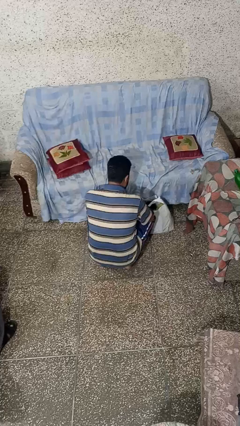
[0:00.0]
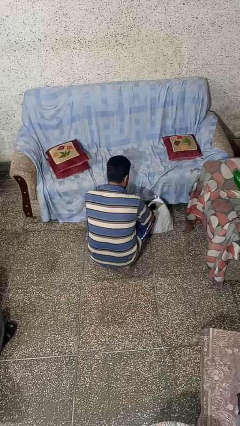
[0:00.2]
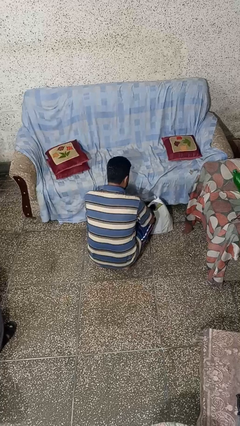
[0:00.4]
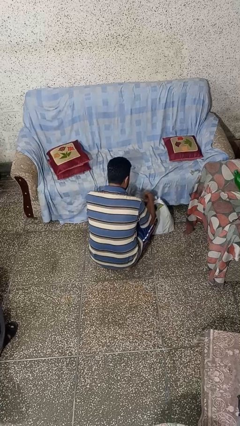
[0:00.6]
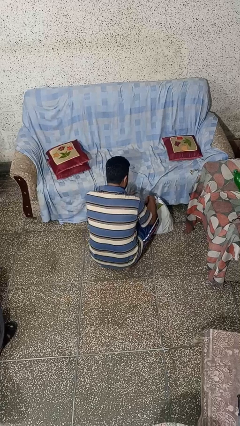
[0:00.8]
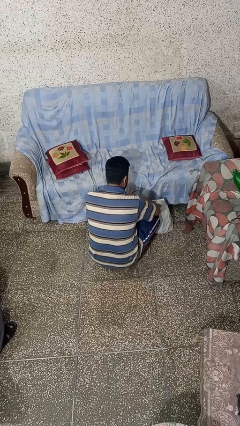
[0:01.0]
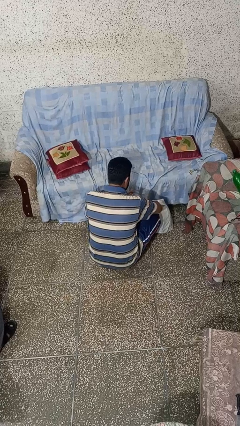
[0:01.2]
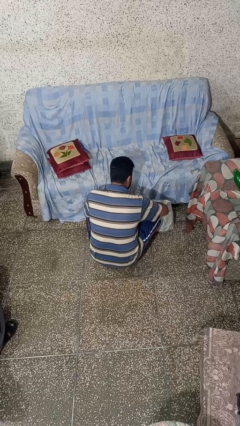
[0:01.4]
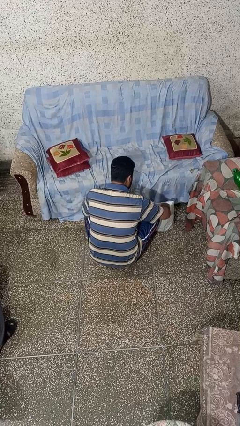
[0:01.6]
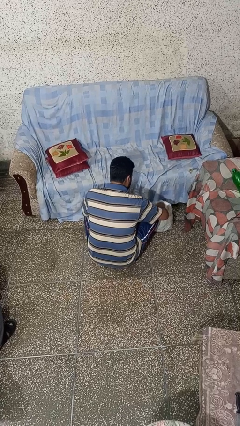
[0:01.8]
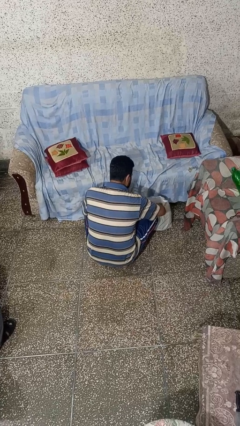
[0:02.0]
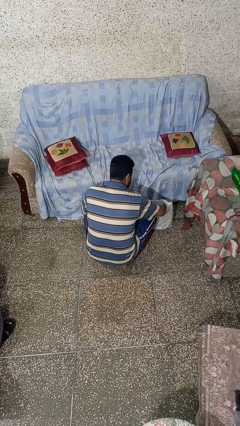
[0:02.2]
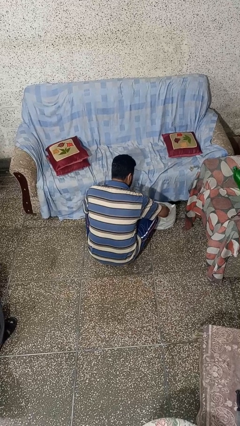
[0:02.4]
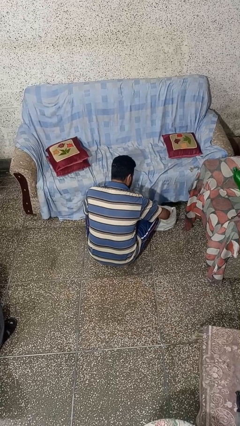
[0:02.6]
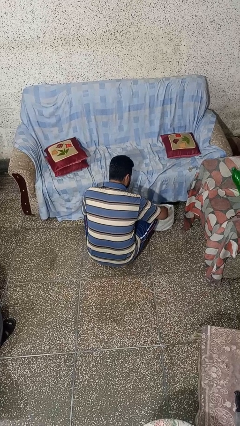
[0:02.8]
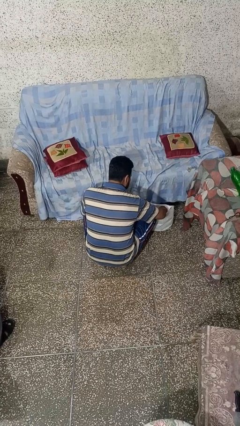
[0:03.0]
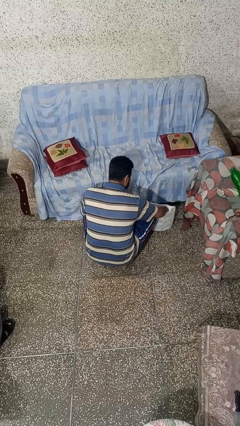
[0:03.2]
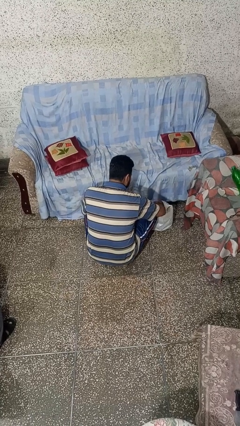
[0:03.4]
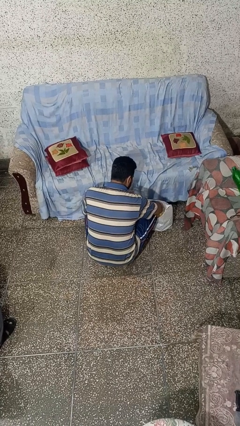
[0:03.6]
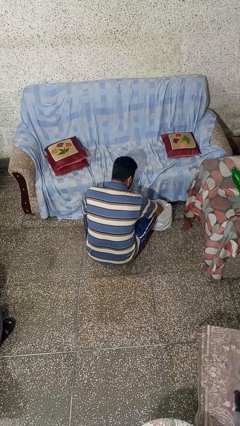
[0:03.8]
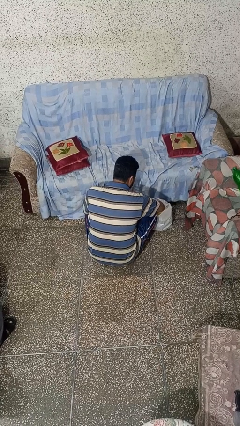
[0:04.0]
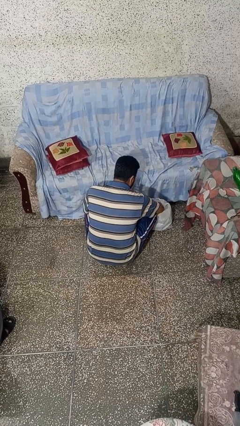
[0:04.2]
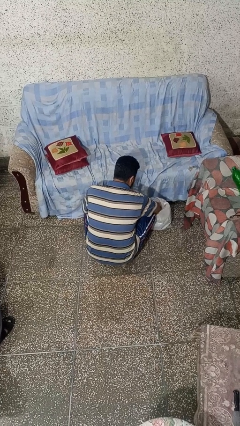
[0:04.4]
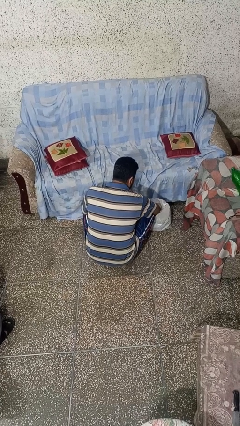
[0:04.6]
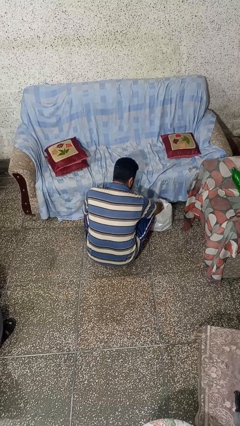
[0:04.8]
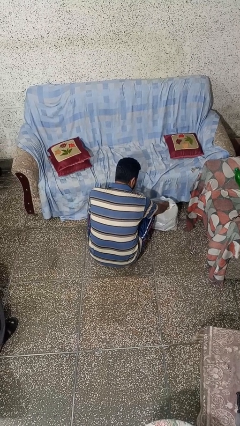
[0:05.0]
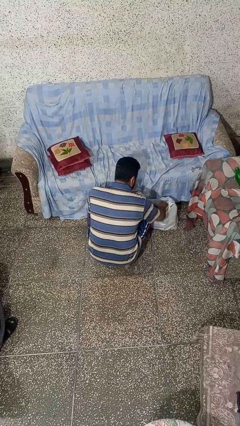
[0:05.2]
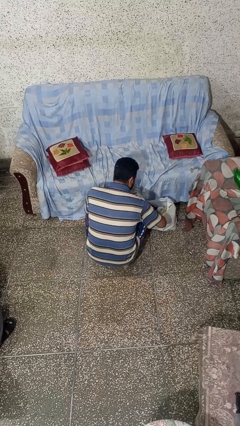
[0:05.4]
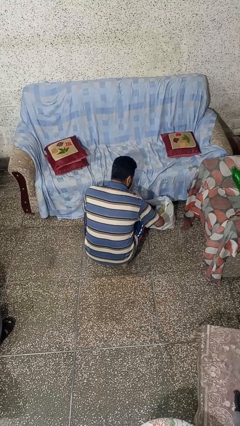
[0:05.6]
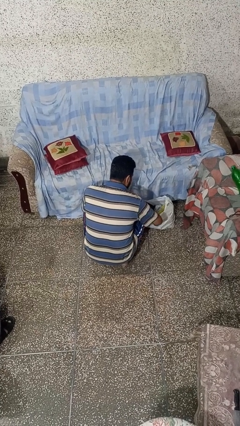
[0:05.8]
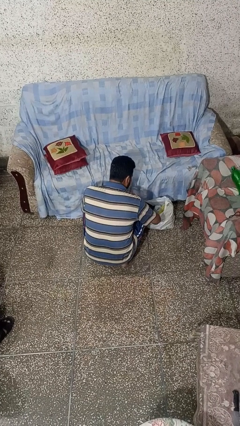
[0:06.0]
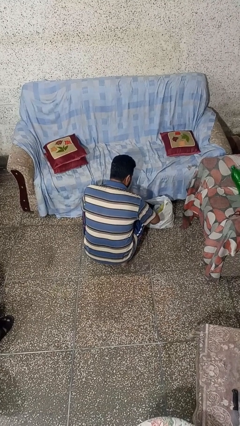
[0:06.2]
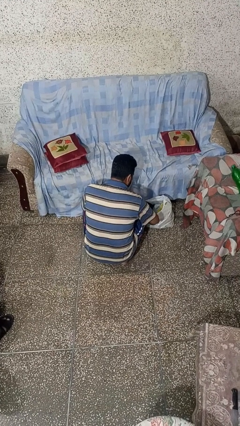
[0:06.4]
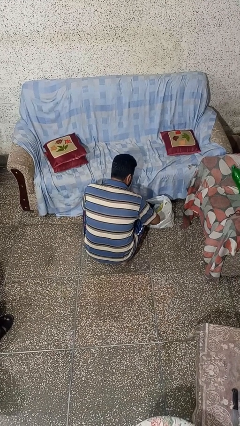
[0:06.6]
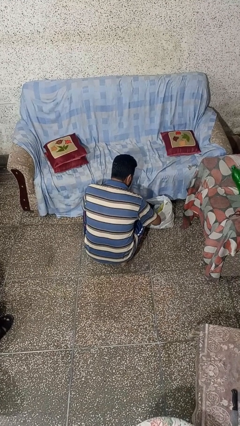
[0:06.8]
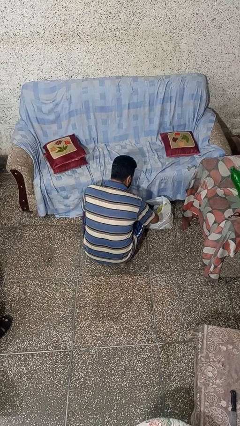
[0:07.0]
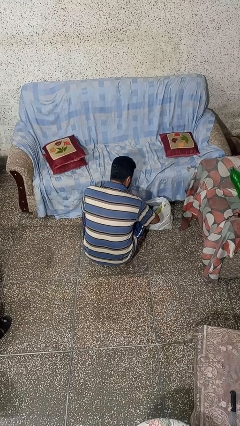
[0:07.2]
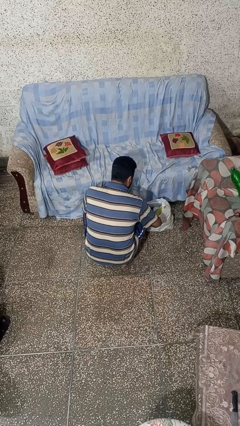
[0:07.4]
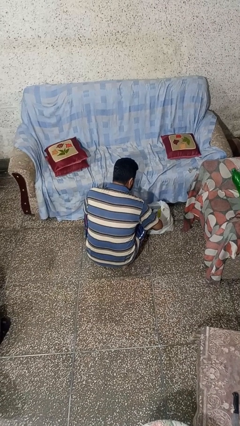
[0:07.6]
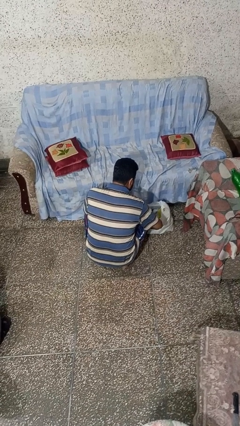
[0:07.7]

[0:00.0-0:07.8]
person searches in bag

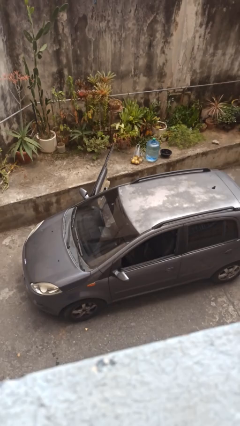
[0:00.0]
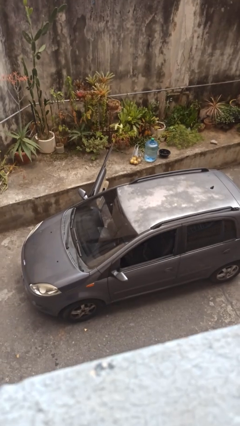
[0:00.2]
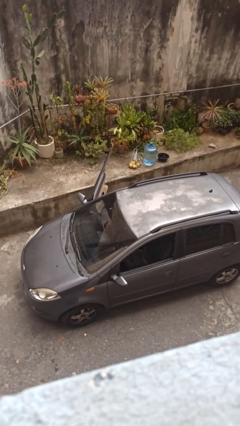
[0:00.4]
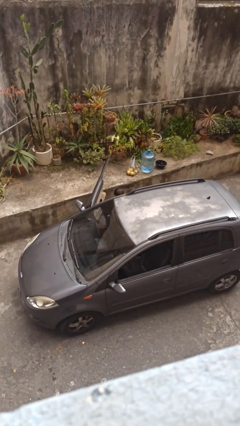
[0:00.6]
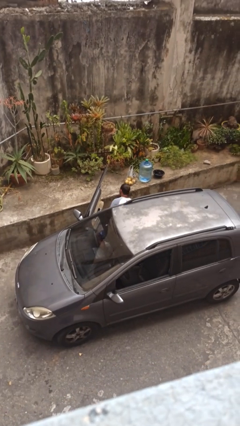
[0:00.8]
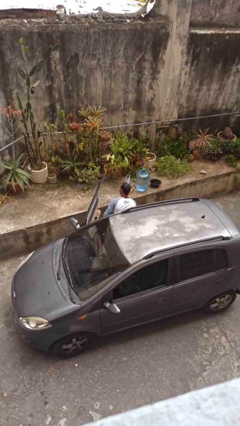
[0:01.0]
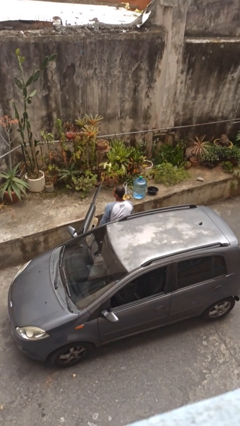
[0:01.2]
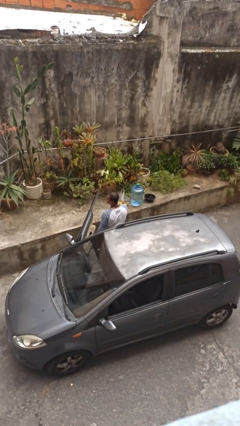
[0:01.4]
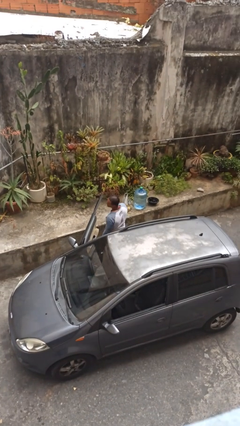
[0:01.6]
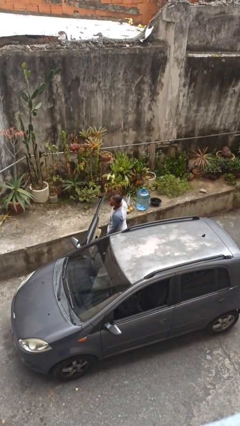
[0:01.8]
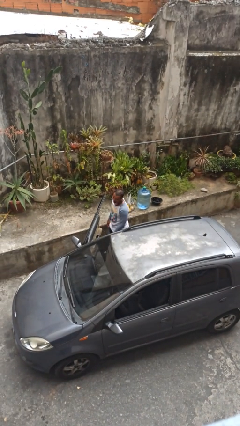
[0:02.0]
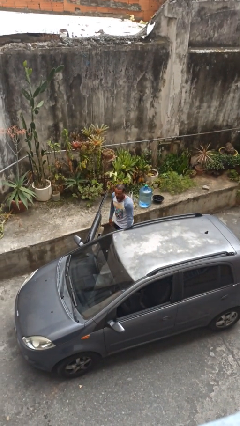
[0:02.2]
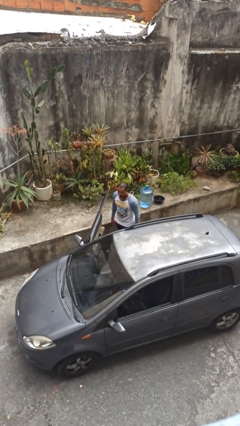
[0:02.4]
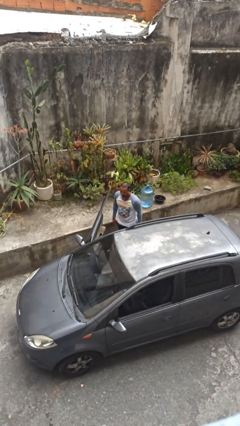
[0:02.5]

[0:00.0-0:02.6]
person exits car

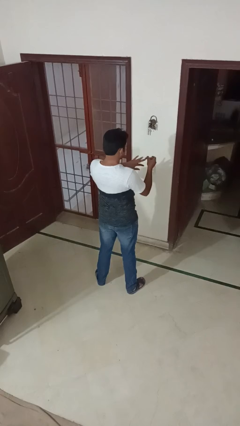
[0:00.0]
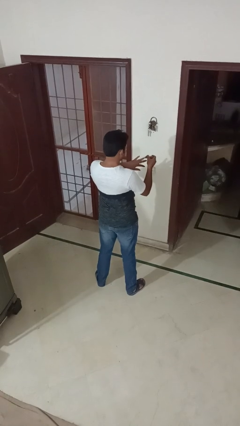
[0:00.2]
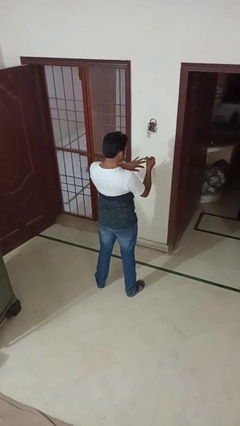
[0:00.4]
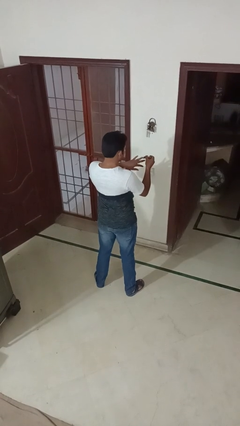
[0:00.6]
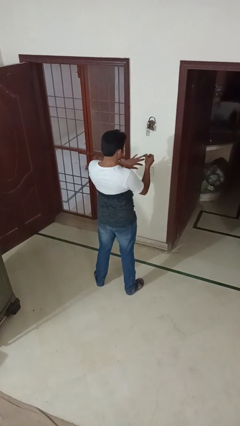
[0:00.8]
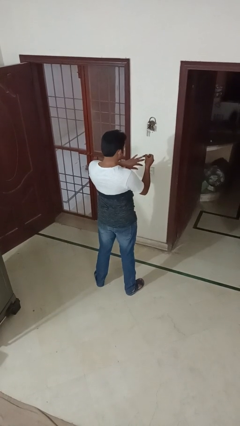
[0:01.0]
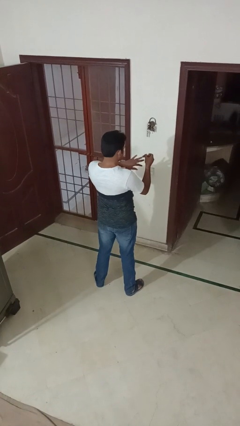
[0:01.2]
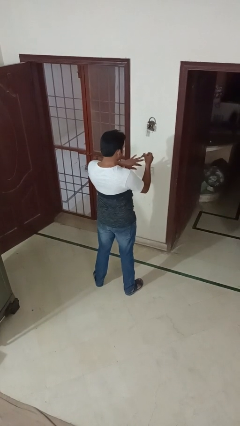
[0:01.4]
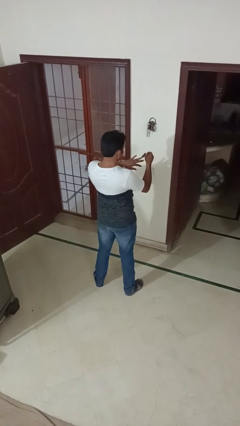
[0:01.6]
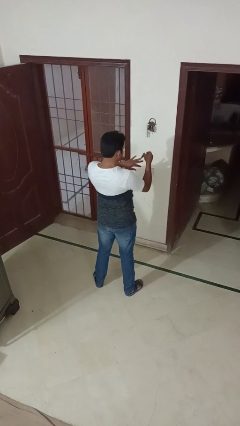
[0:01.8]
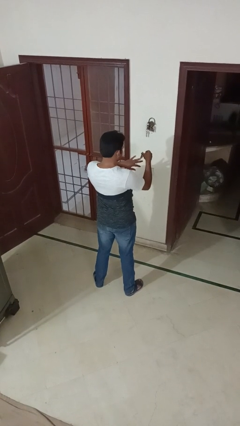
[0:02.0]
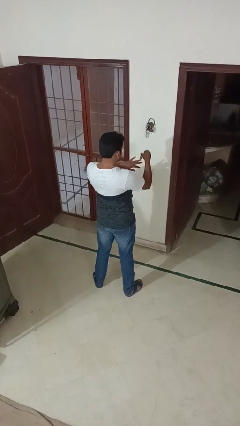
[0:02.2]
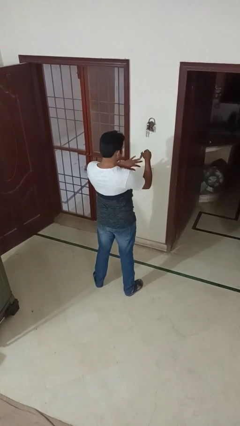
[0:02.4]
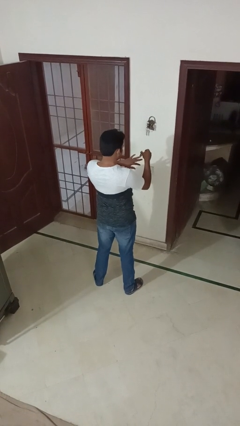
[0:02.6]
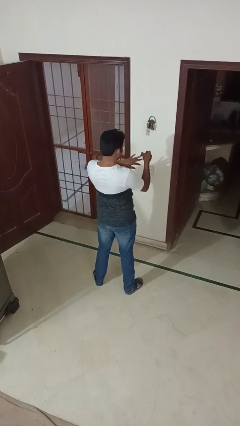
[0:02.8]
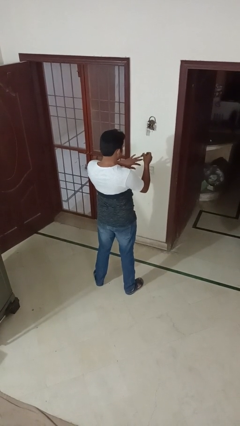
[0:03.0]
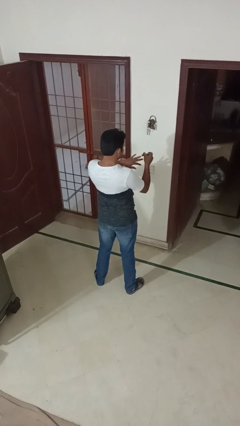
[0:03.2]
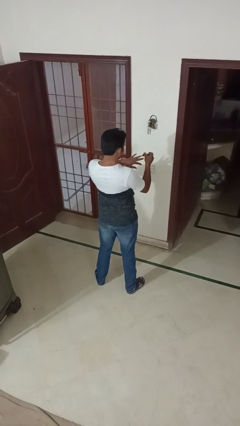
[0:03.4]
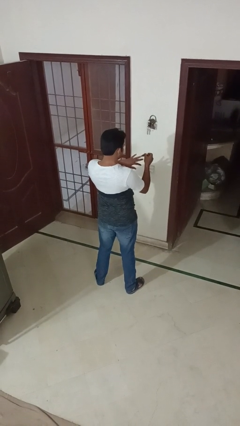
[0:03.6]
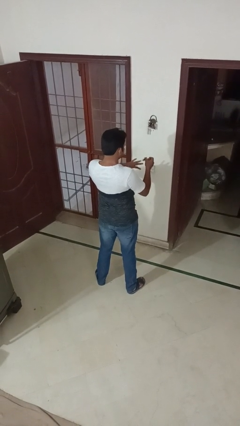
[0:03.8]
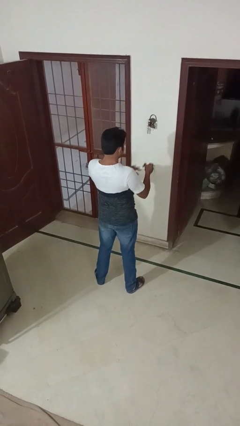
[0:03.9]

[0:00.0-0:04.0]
person clips fingernails

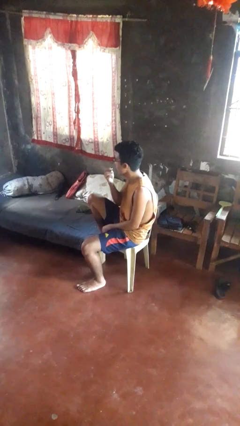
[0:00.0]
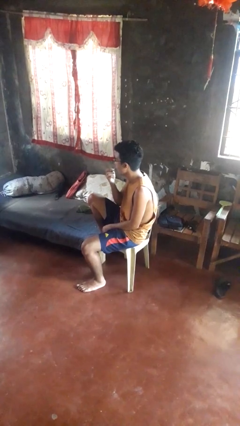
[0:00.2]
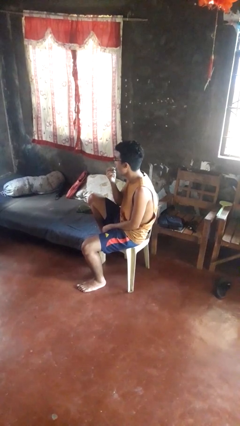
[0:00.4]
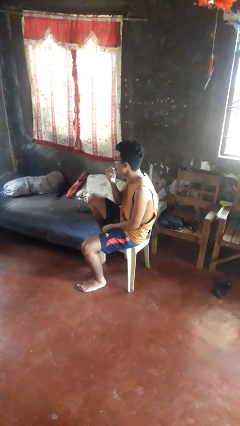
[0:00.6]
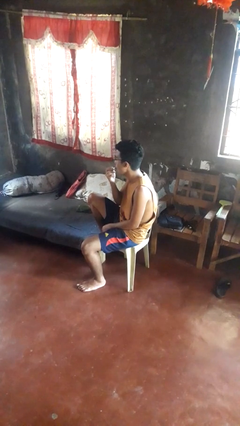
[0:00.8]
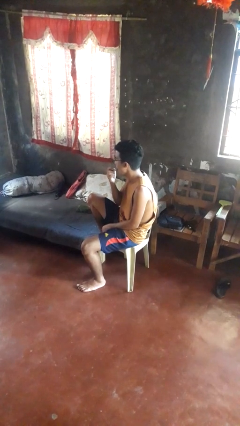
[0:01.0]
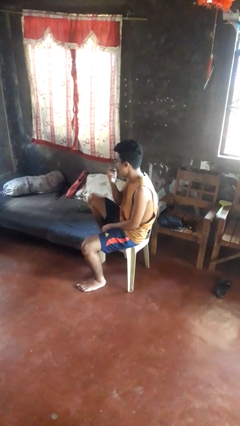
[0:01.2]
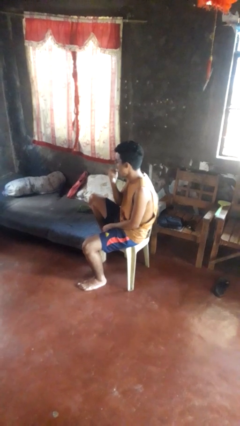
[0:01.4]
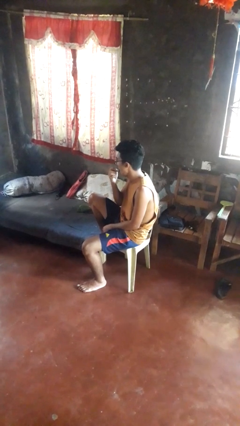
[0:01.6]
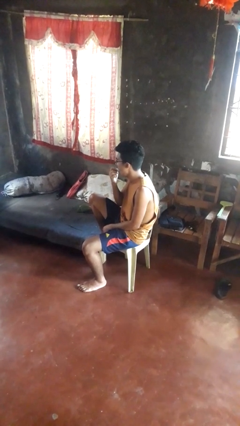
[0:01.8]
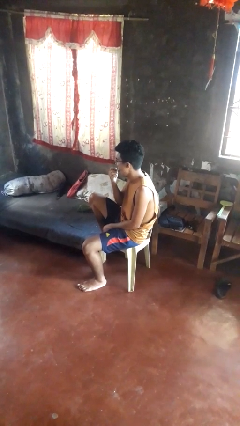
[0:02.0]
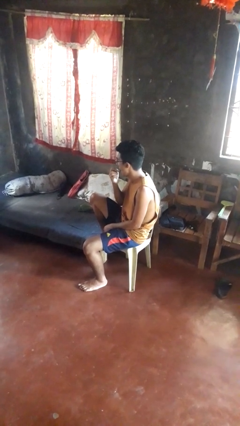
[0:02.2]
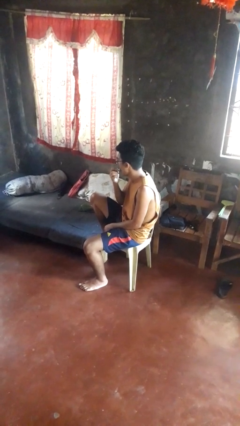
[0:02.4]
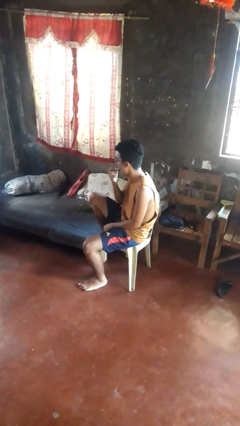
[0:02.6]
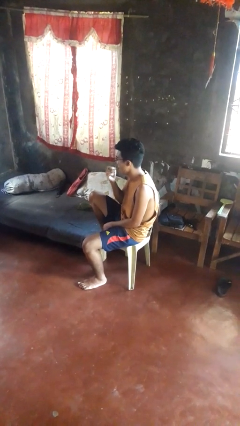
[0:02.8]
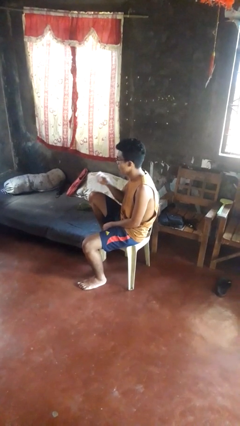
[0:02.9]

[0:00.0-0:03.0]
person applies lip makeup

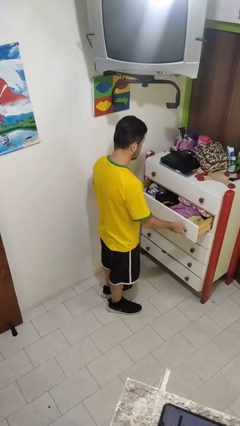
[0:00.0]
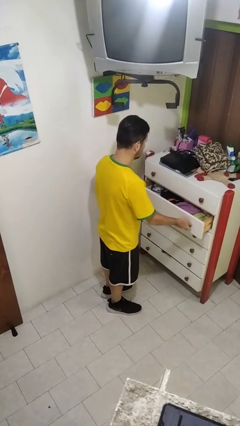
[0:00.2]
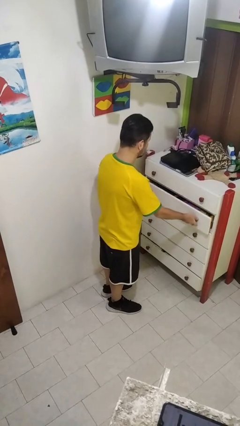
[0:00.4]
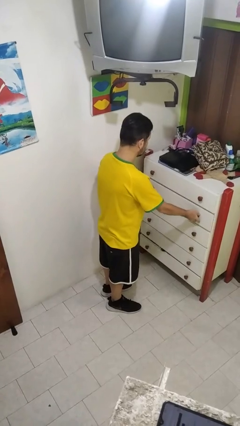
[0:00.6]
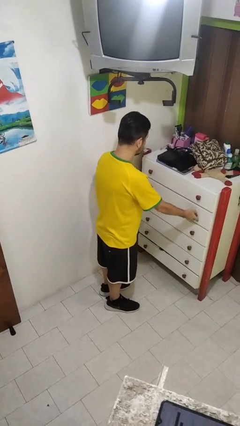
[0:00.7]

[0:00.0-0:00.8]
person closes dresser drawer
